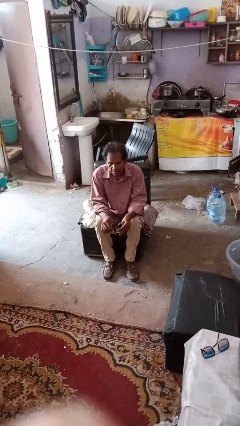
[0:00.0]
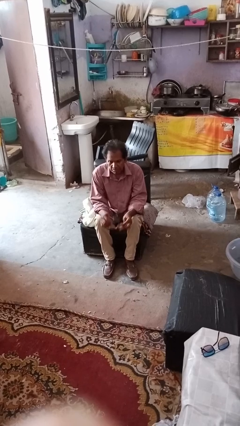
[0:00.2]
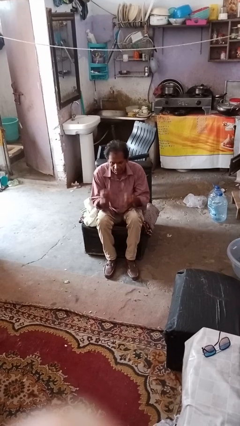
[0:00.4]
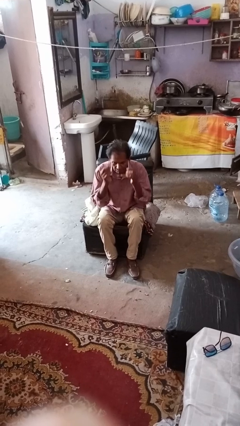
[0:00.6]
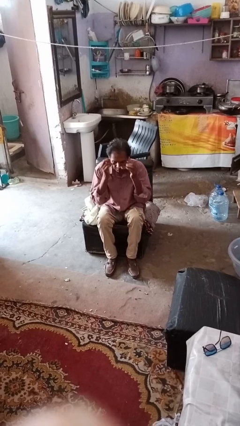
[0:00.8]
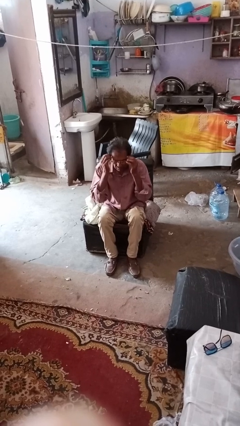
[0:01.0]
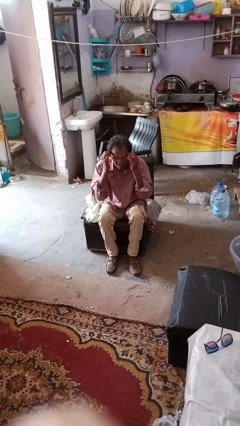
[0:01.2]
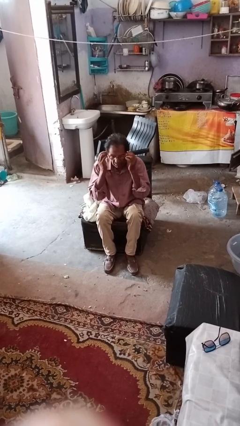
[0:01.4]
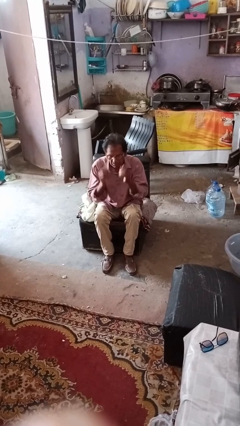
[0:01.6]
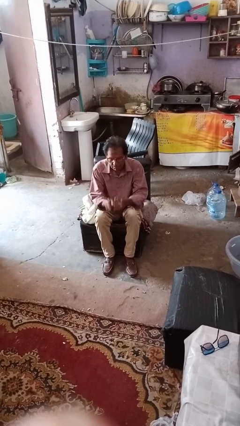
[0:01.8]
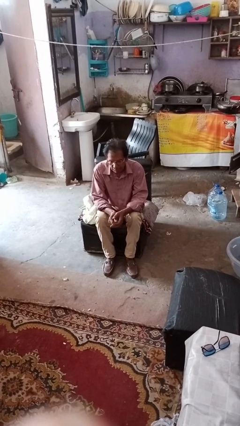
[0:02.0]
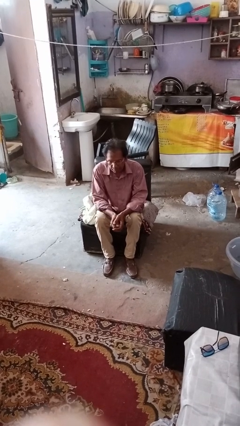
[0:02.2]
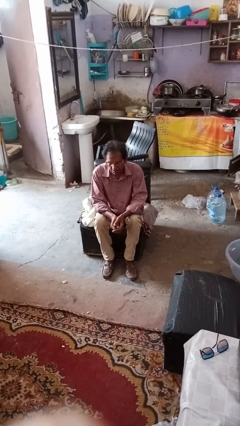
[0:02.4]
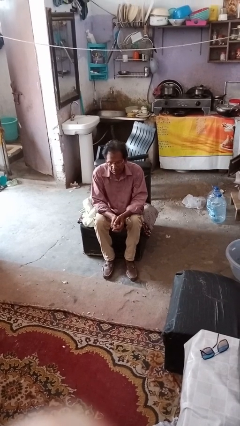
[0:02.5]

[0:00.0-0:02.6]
person puts on glasses

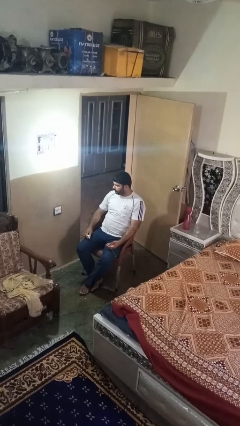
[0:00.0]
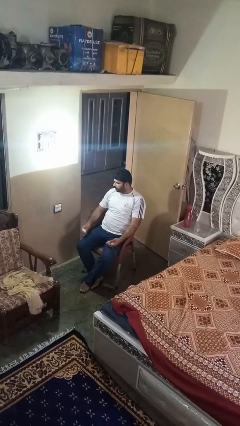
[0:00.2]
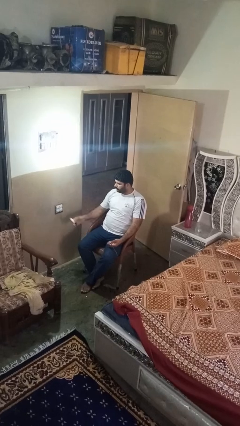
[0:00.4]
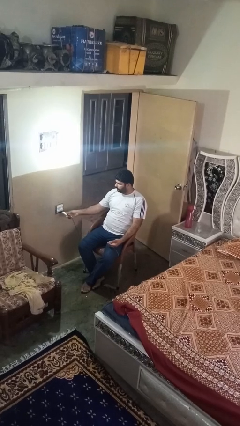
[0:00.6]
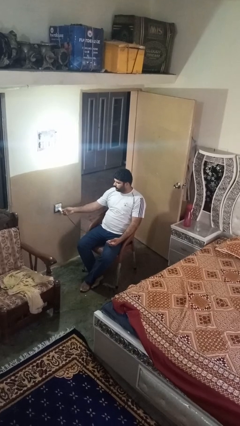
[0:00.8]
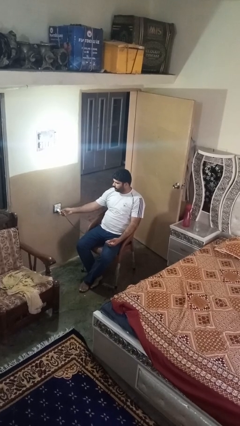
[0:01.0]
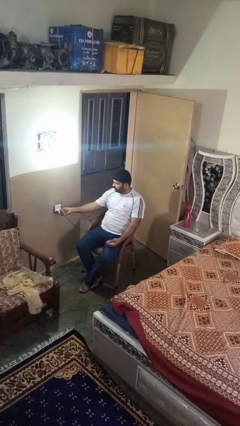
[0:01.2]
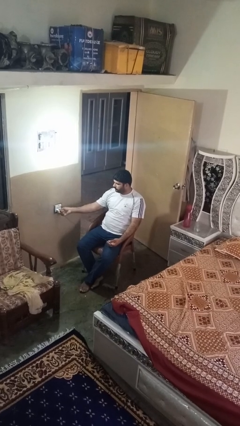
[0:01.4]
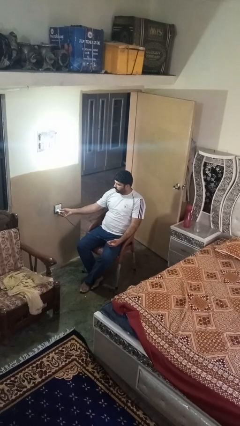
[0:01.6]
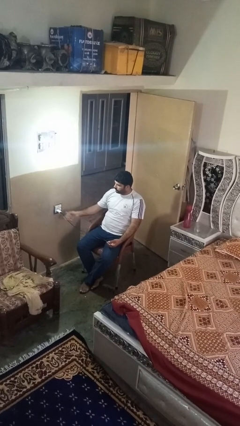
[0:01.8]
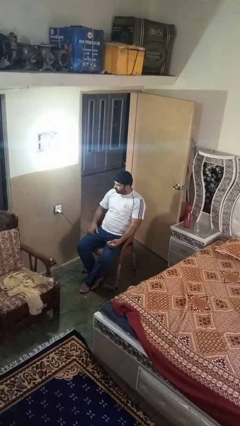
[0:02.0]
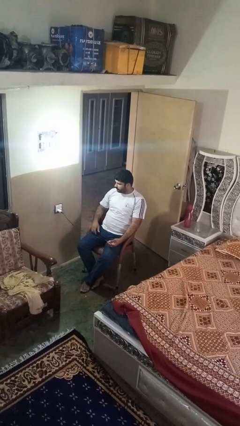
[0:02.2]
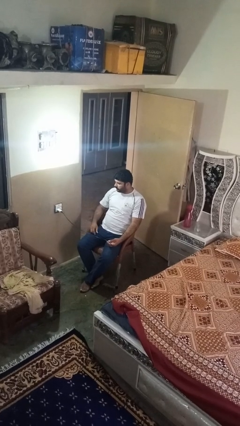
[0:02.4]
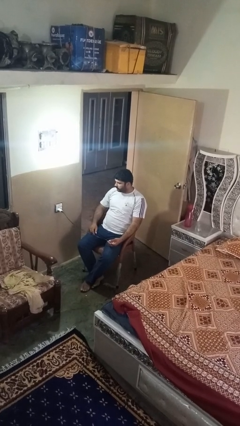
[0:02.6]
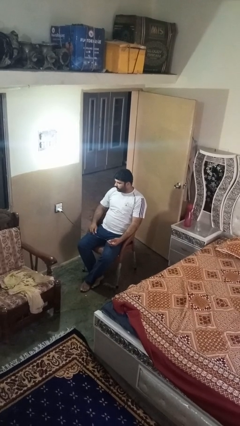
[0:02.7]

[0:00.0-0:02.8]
person plugs into electrical socket

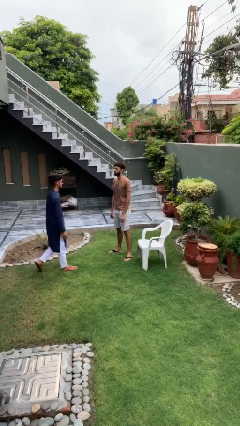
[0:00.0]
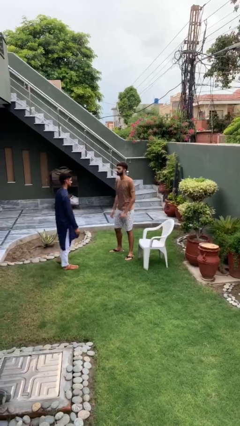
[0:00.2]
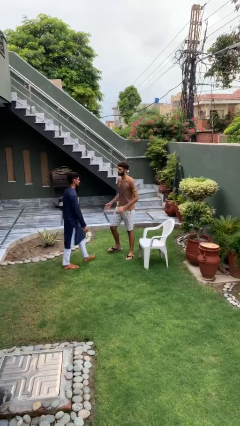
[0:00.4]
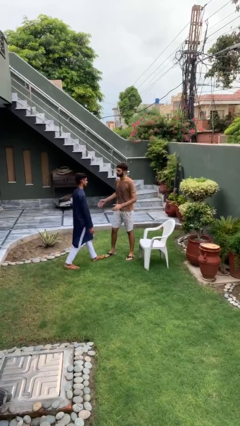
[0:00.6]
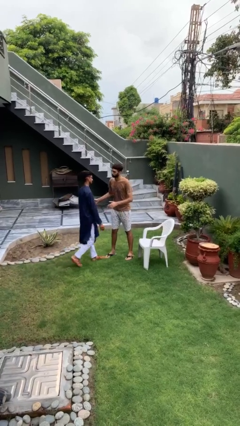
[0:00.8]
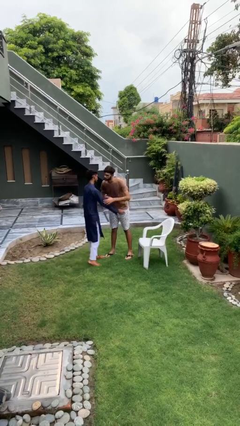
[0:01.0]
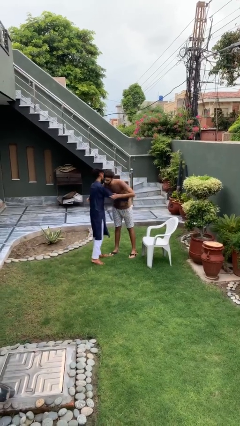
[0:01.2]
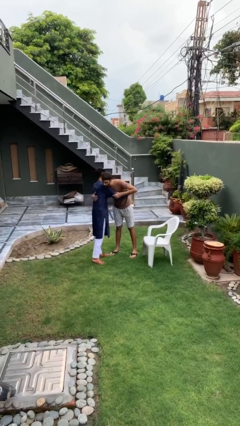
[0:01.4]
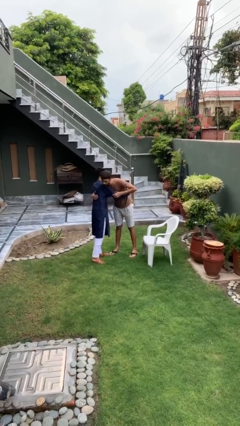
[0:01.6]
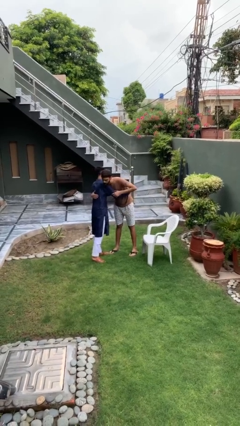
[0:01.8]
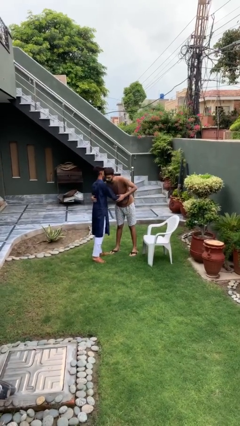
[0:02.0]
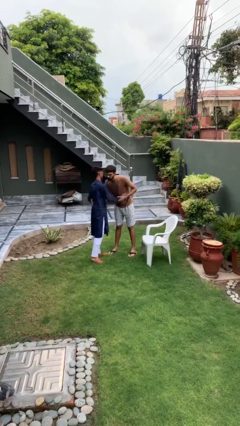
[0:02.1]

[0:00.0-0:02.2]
person embraces person

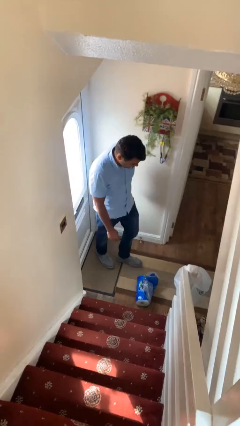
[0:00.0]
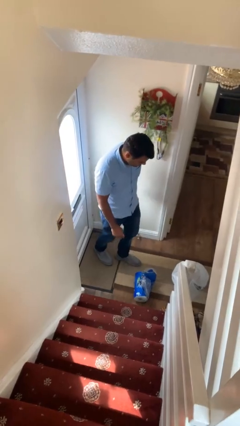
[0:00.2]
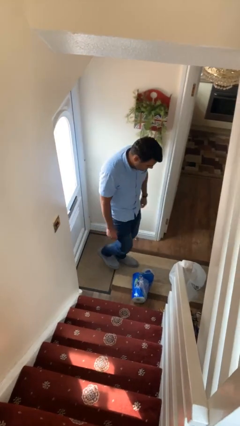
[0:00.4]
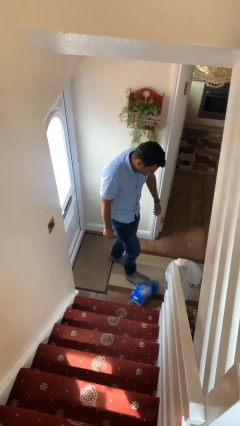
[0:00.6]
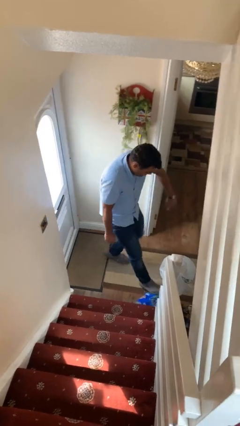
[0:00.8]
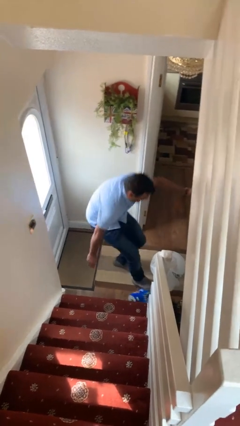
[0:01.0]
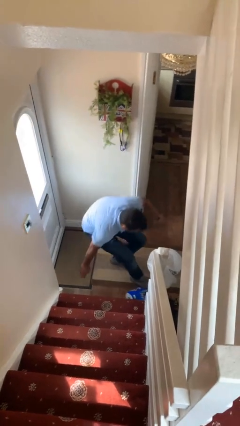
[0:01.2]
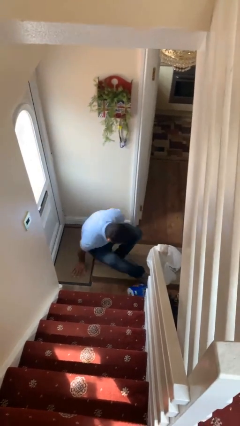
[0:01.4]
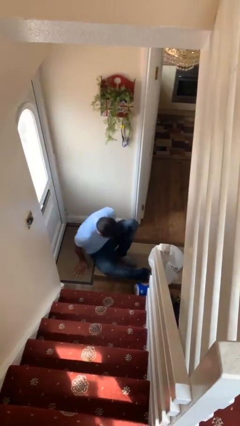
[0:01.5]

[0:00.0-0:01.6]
person trips on object on floor

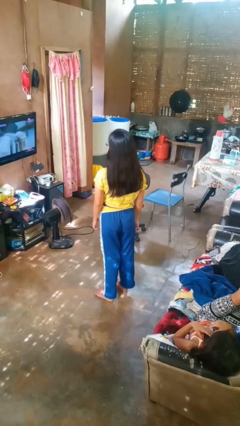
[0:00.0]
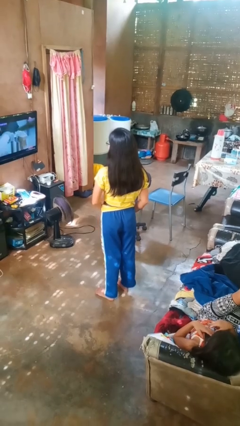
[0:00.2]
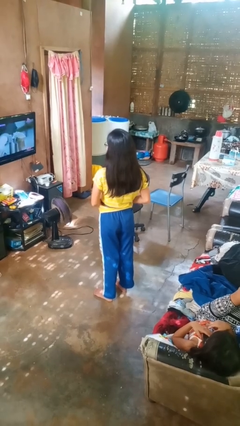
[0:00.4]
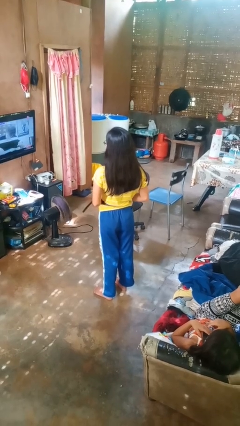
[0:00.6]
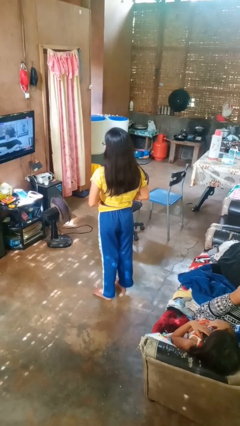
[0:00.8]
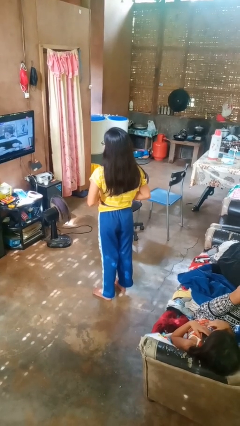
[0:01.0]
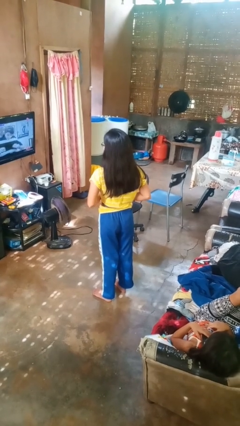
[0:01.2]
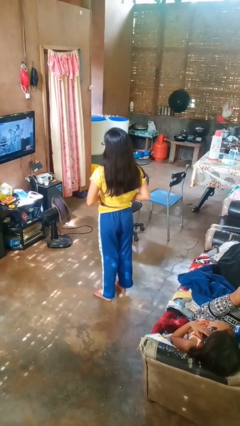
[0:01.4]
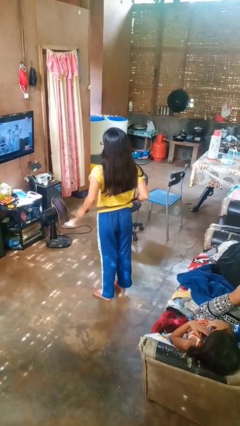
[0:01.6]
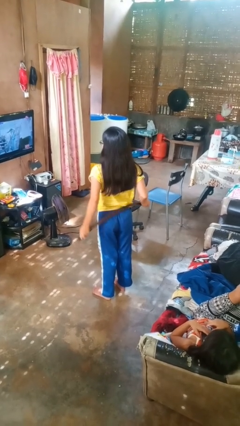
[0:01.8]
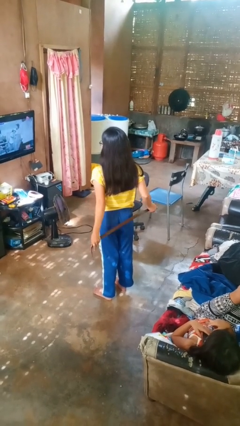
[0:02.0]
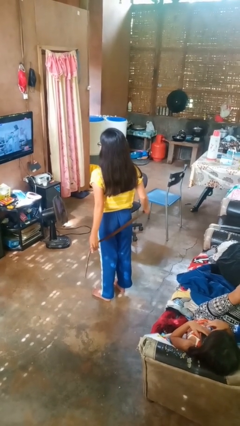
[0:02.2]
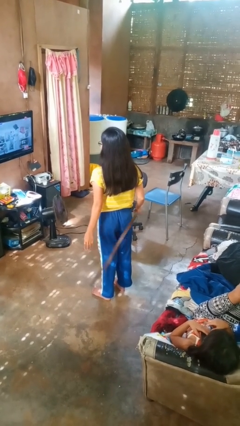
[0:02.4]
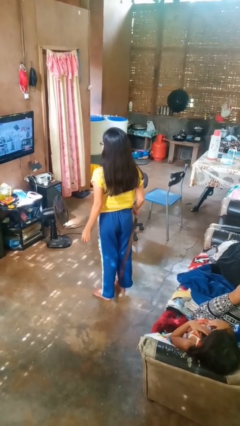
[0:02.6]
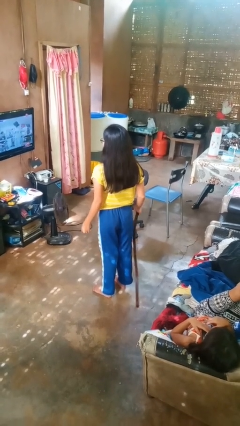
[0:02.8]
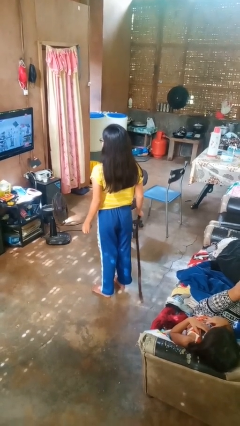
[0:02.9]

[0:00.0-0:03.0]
person takes off belt

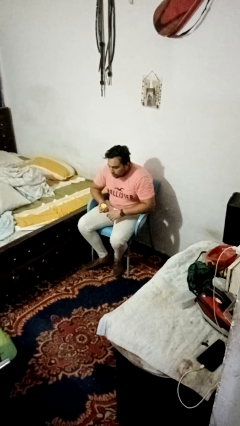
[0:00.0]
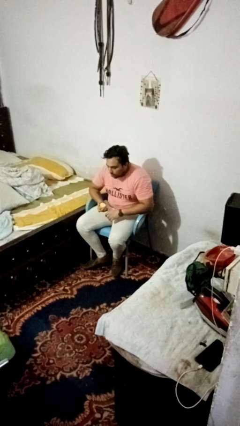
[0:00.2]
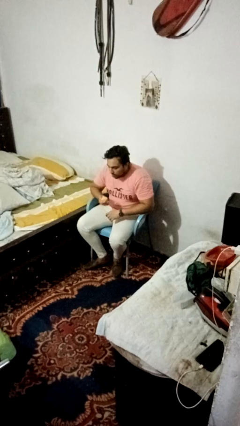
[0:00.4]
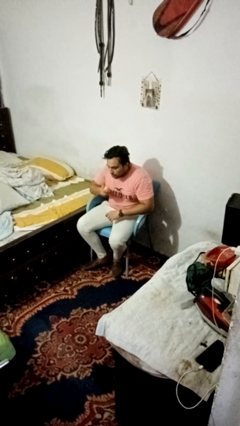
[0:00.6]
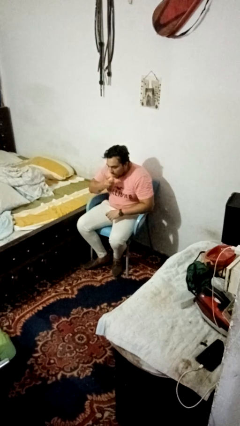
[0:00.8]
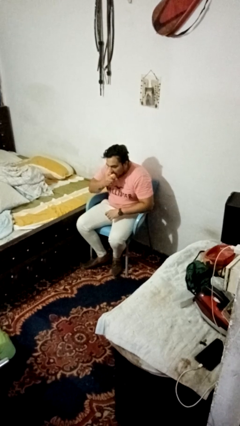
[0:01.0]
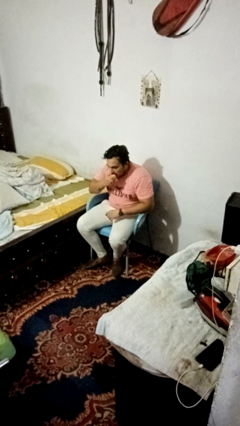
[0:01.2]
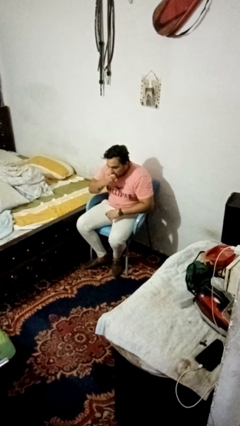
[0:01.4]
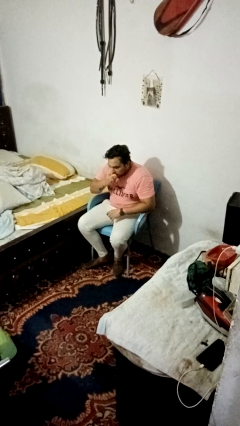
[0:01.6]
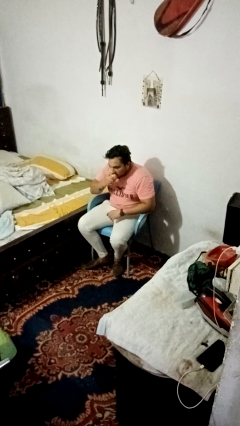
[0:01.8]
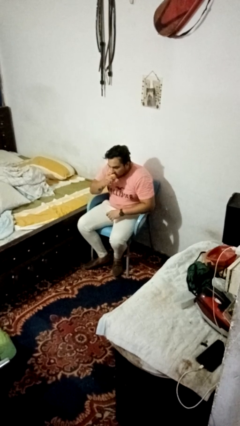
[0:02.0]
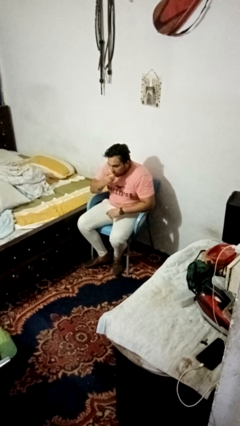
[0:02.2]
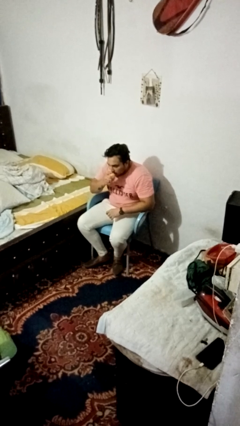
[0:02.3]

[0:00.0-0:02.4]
person eats apple

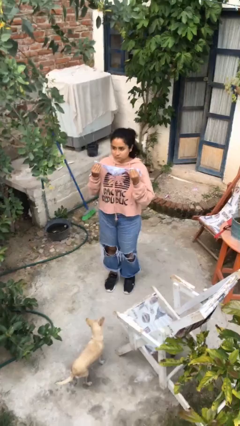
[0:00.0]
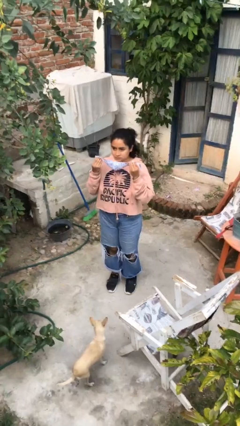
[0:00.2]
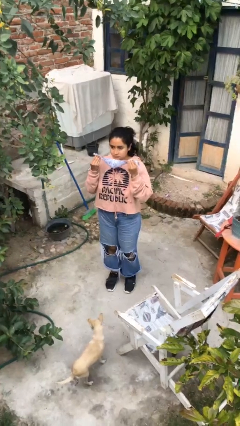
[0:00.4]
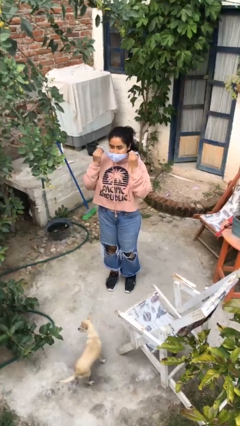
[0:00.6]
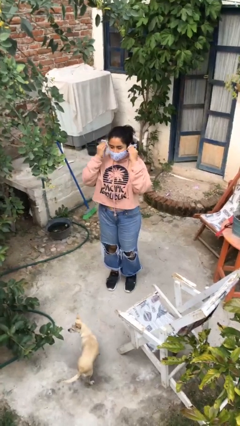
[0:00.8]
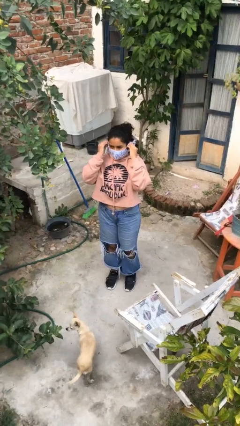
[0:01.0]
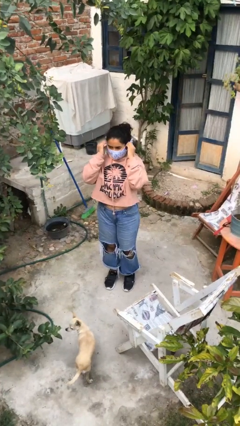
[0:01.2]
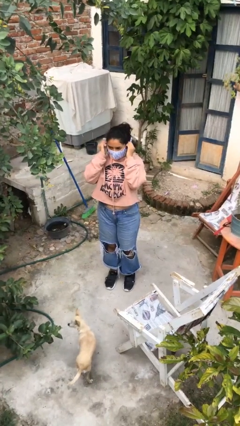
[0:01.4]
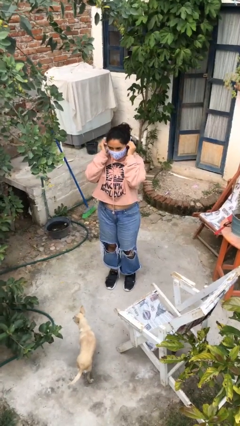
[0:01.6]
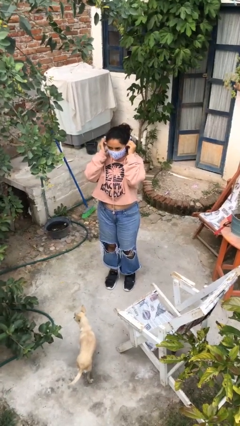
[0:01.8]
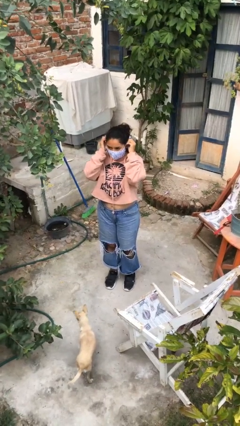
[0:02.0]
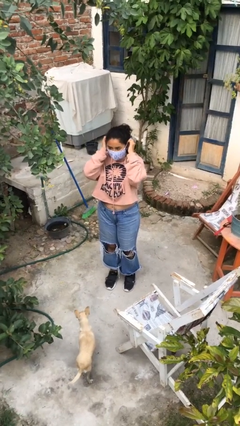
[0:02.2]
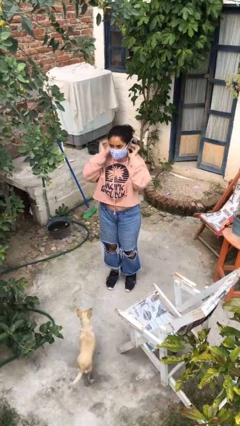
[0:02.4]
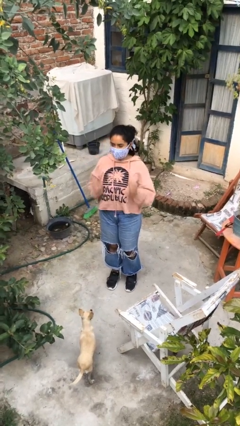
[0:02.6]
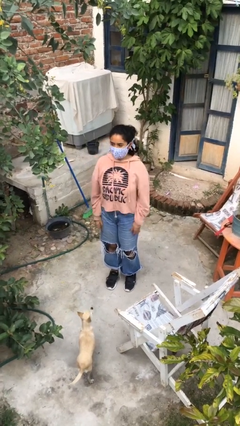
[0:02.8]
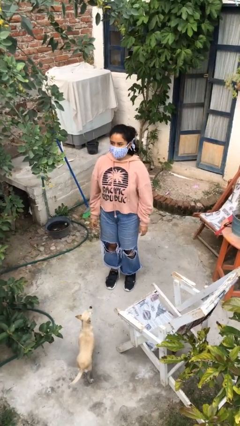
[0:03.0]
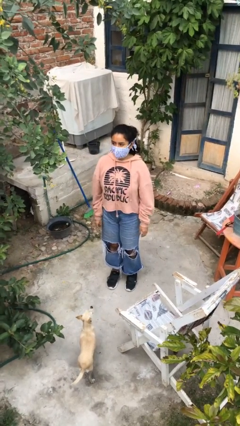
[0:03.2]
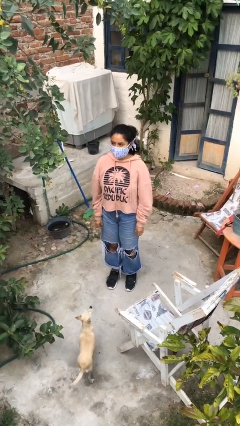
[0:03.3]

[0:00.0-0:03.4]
person puts on facemask
